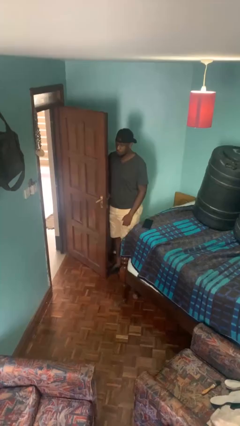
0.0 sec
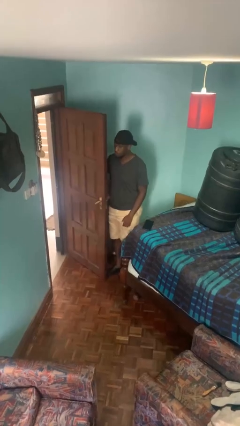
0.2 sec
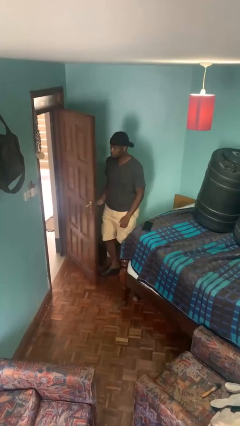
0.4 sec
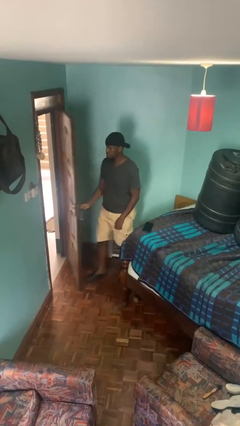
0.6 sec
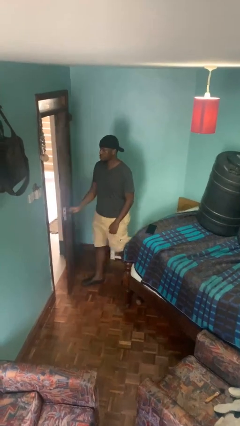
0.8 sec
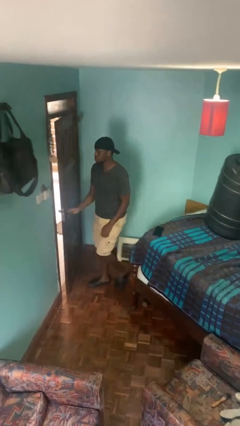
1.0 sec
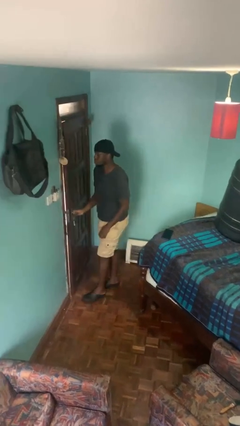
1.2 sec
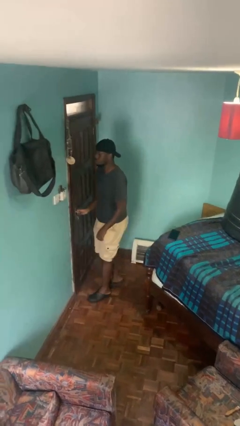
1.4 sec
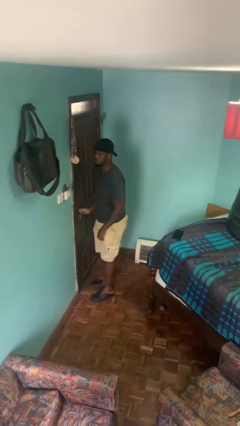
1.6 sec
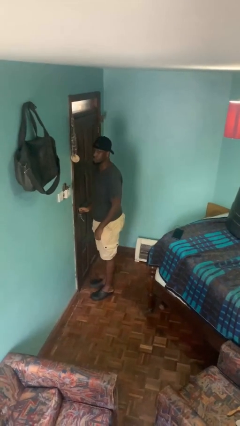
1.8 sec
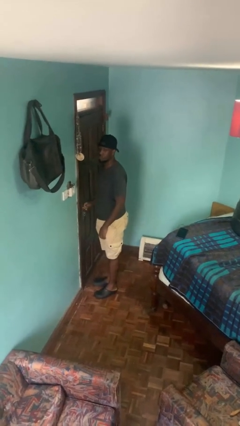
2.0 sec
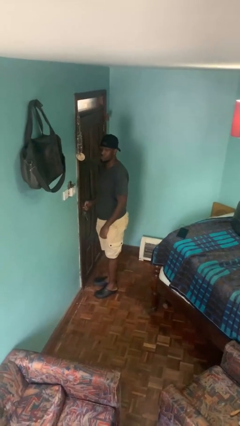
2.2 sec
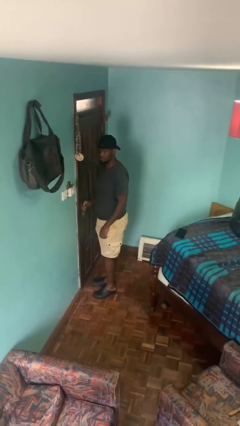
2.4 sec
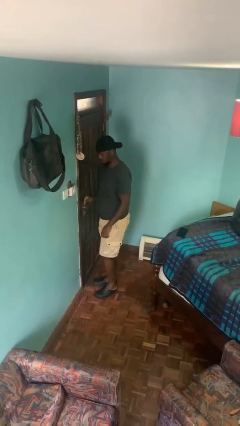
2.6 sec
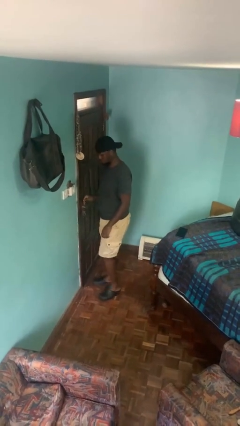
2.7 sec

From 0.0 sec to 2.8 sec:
person closes facility door

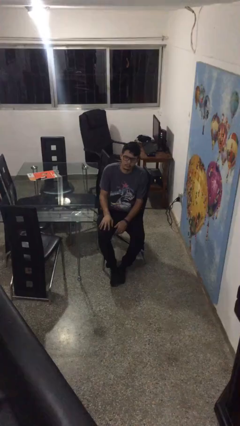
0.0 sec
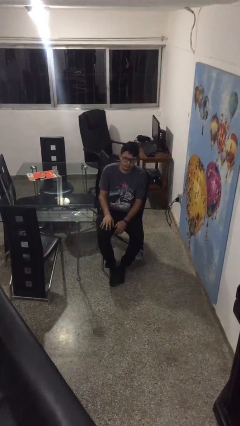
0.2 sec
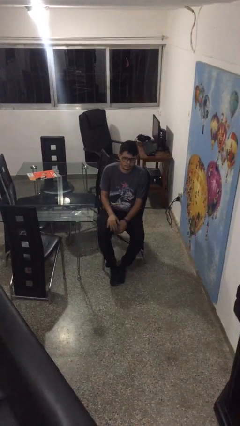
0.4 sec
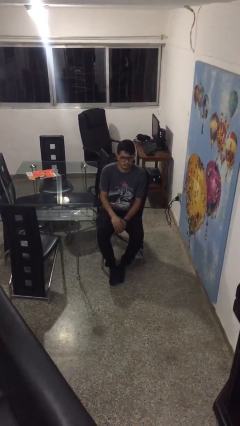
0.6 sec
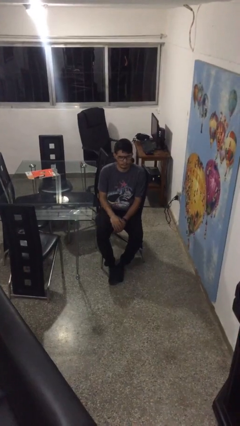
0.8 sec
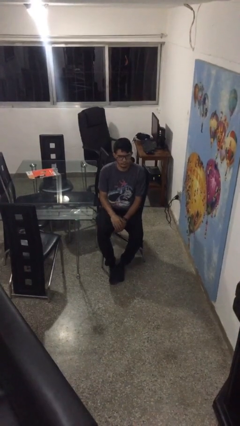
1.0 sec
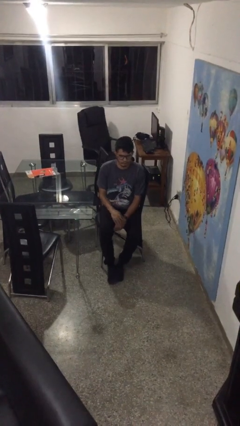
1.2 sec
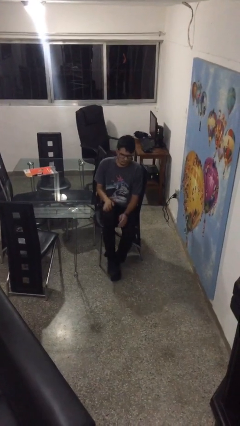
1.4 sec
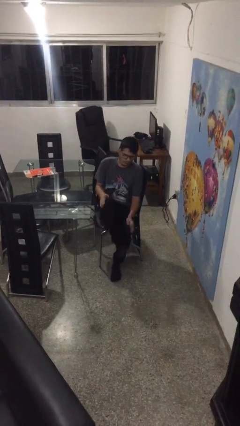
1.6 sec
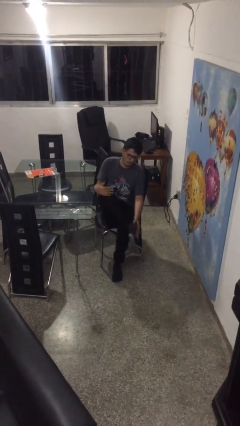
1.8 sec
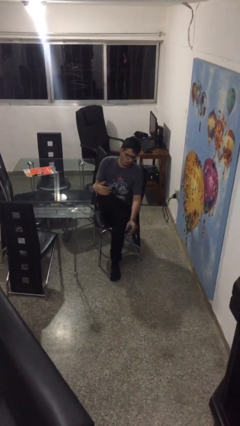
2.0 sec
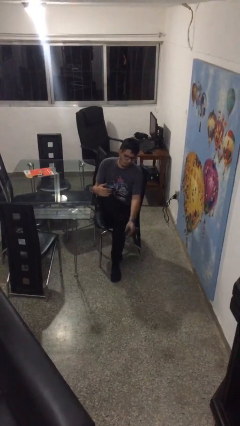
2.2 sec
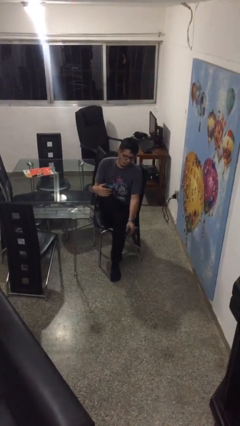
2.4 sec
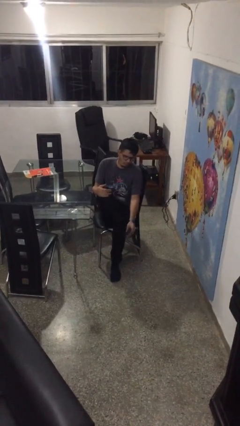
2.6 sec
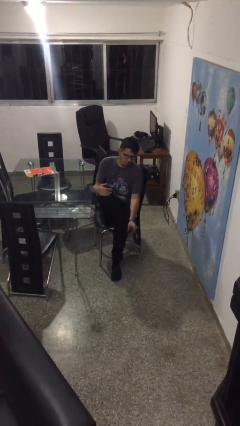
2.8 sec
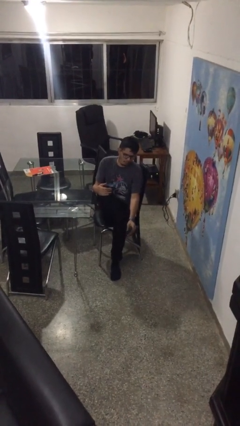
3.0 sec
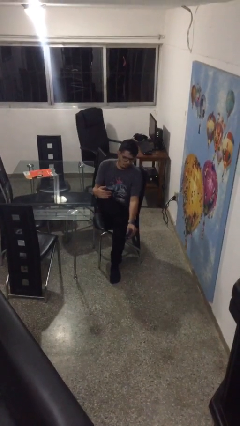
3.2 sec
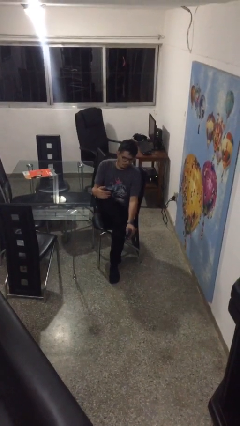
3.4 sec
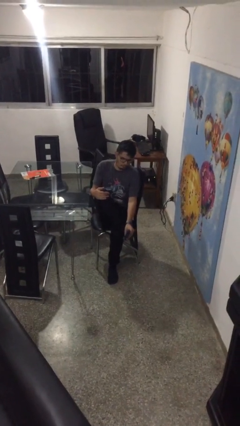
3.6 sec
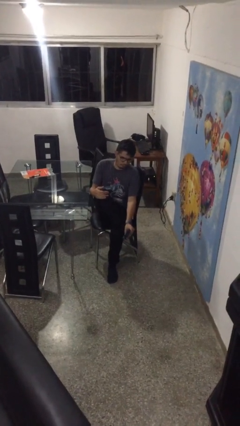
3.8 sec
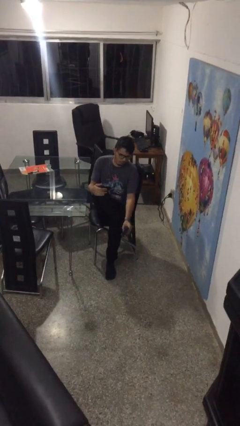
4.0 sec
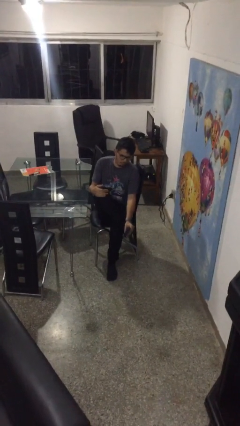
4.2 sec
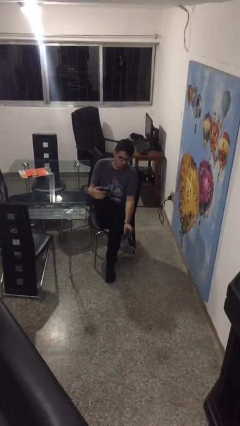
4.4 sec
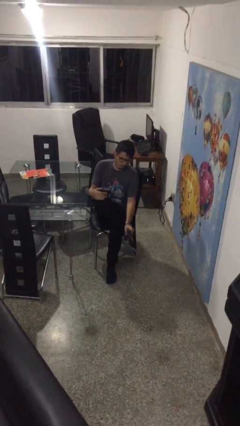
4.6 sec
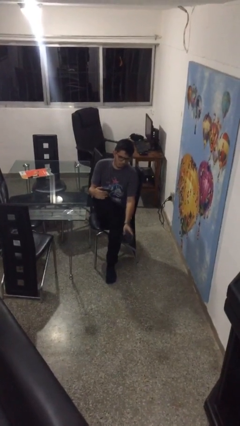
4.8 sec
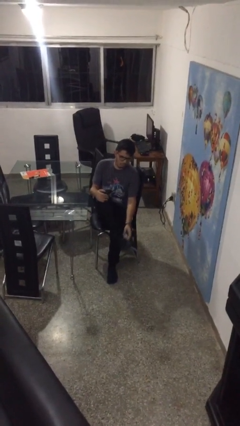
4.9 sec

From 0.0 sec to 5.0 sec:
person rubs foot

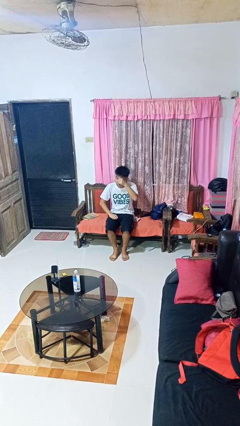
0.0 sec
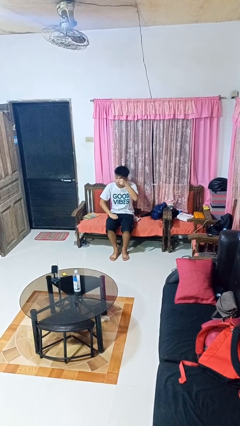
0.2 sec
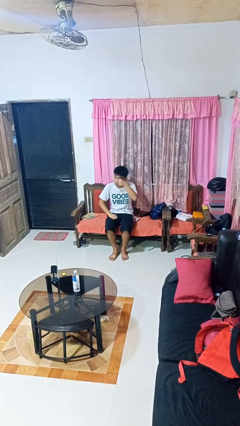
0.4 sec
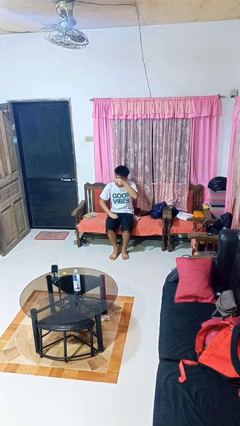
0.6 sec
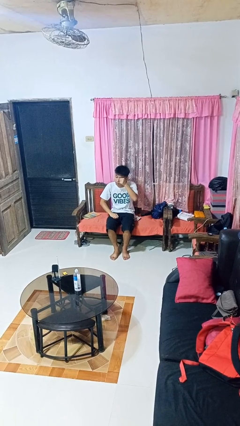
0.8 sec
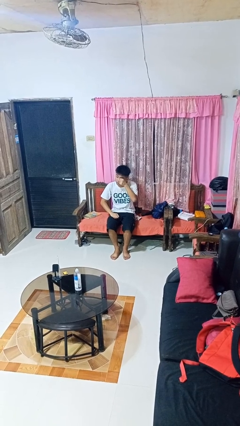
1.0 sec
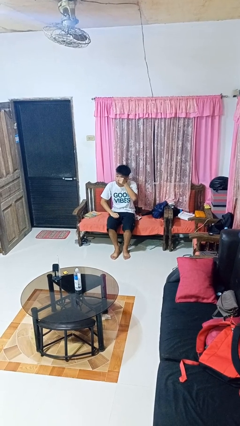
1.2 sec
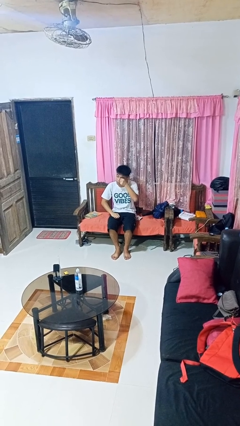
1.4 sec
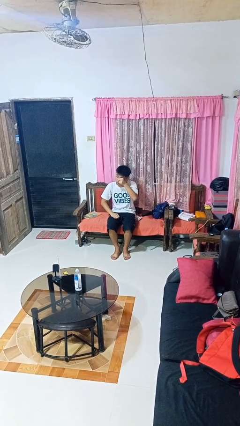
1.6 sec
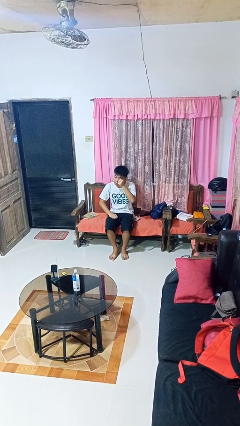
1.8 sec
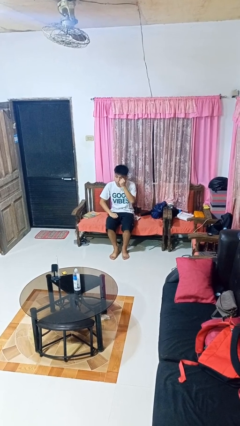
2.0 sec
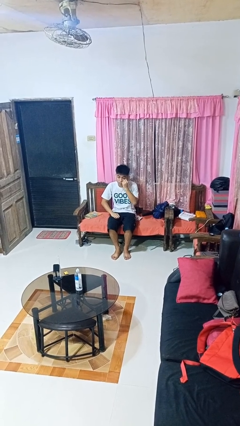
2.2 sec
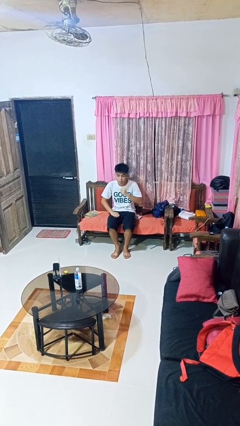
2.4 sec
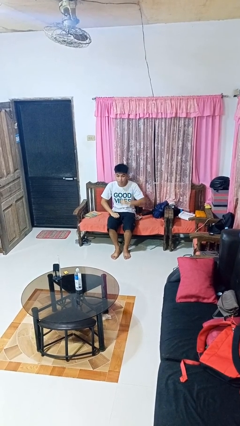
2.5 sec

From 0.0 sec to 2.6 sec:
person rubs eyes

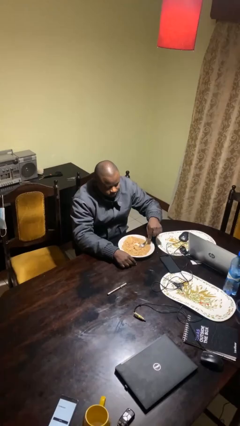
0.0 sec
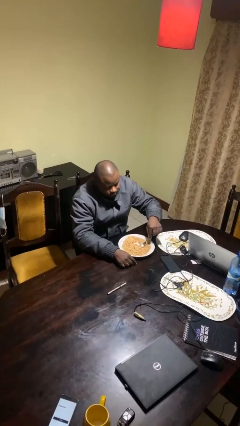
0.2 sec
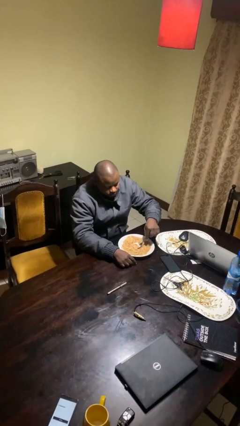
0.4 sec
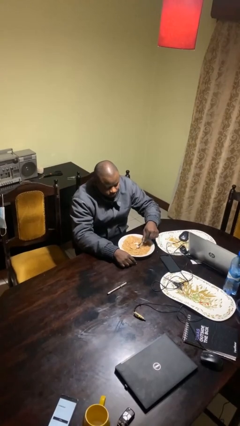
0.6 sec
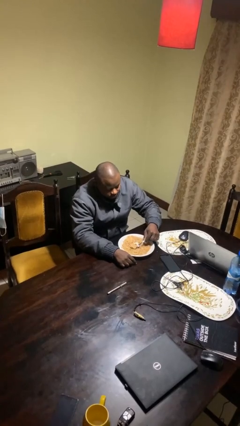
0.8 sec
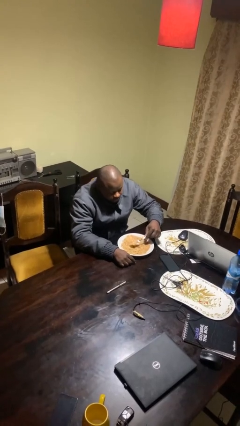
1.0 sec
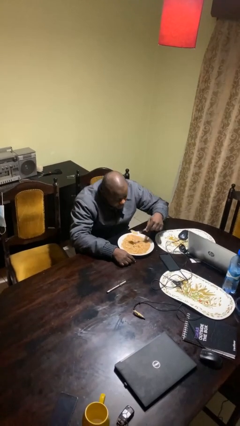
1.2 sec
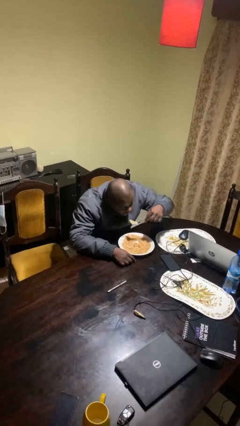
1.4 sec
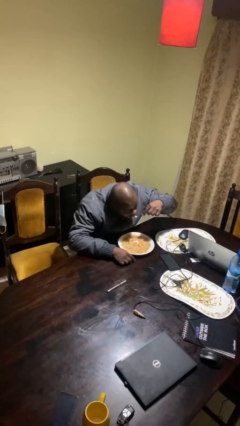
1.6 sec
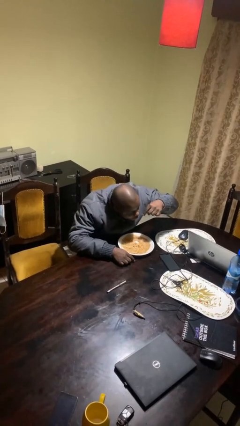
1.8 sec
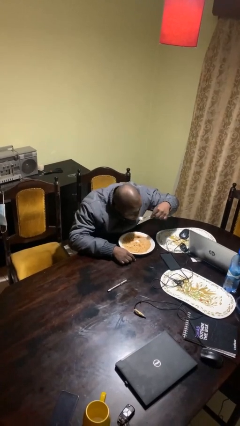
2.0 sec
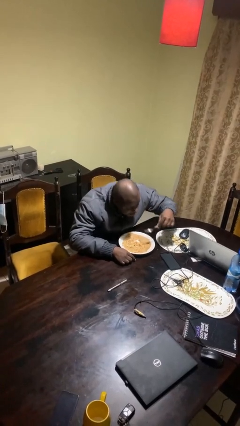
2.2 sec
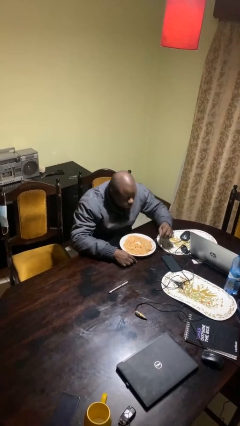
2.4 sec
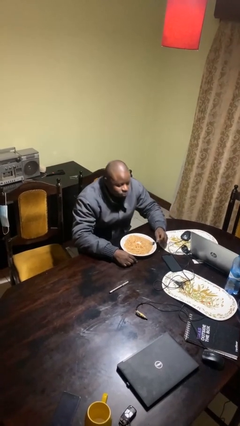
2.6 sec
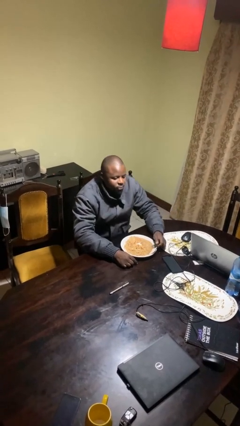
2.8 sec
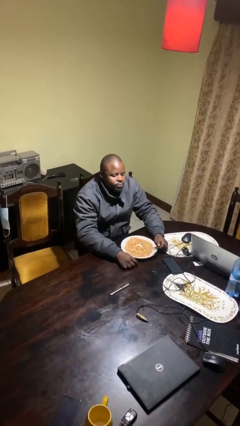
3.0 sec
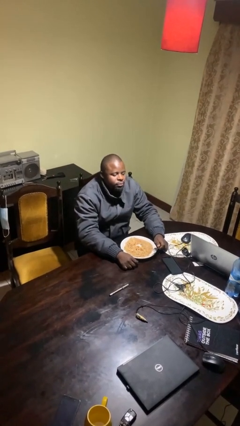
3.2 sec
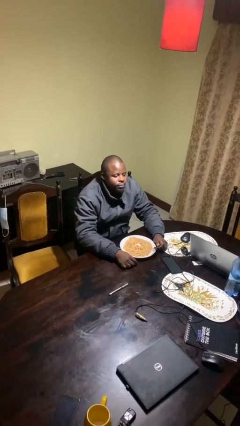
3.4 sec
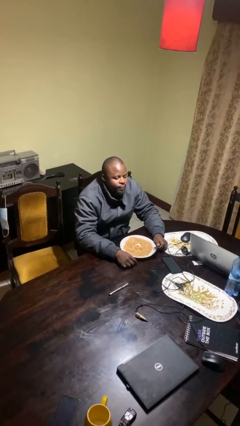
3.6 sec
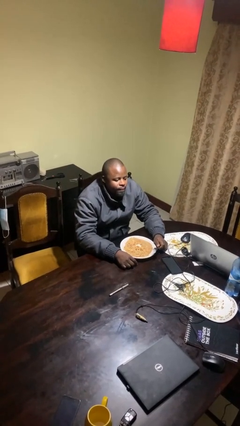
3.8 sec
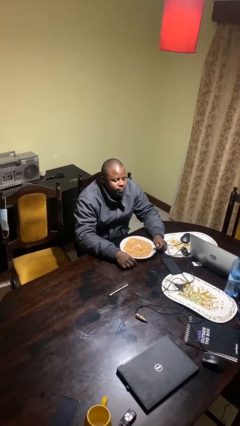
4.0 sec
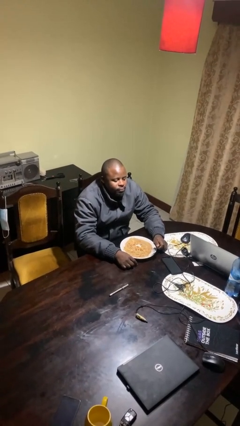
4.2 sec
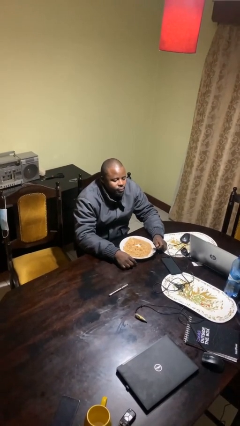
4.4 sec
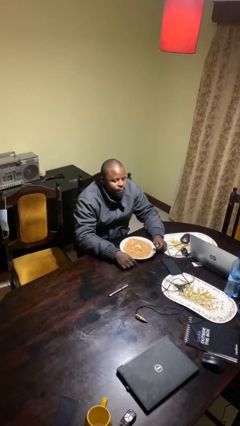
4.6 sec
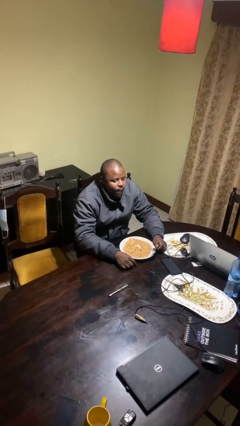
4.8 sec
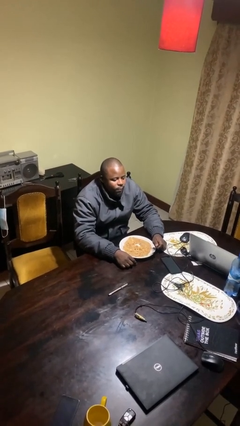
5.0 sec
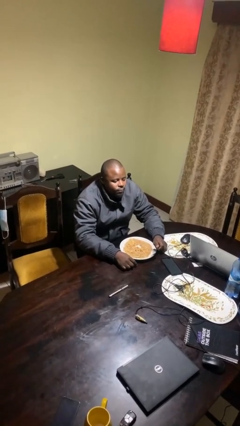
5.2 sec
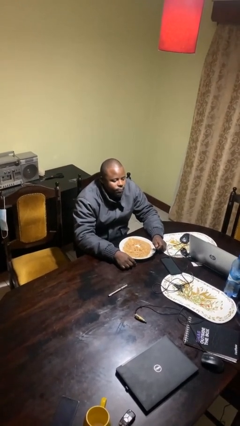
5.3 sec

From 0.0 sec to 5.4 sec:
person eats with utensil

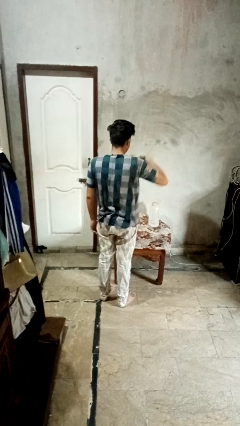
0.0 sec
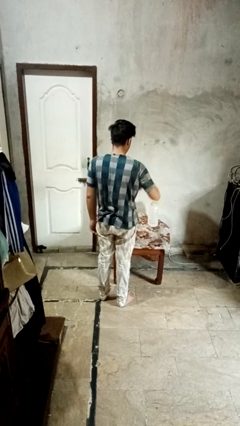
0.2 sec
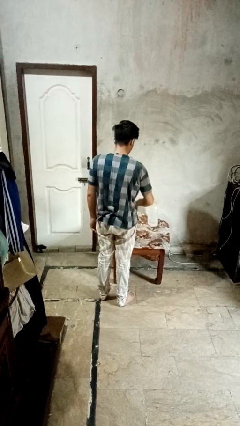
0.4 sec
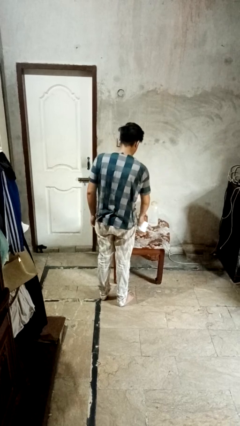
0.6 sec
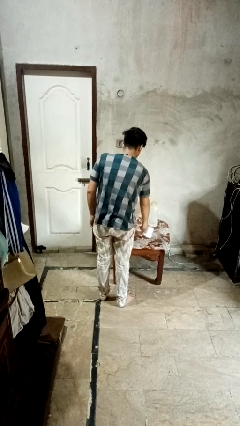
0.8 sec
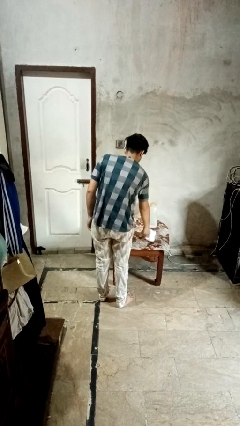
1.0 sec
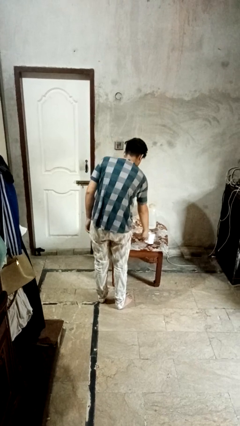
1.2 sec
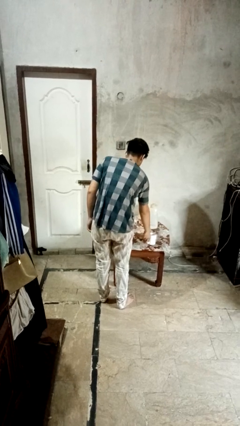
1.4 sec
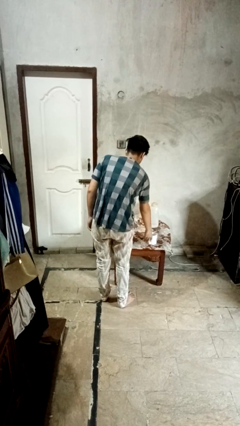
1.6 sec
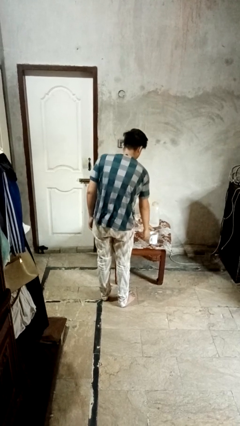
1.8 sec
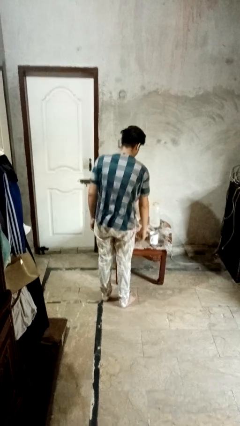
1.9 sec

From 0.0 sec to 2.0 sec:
person puts down object on table
